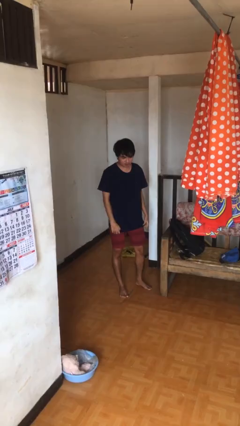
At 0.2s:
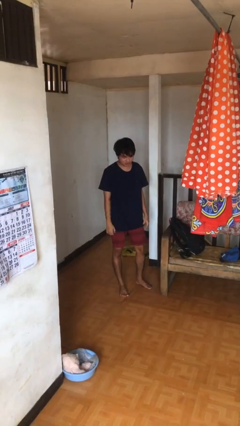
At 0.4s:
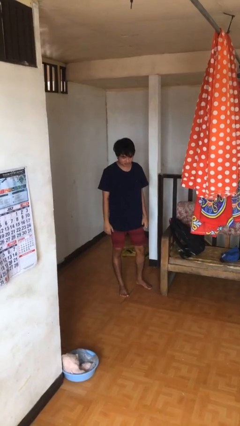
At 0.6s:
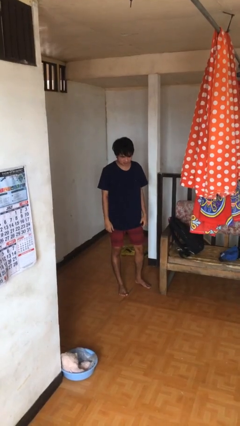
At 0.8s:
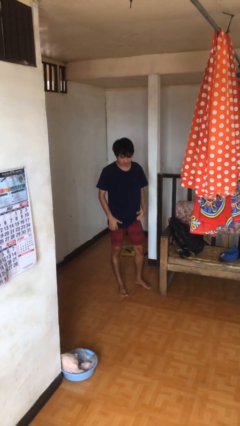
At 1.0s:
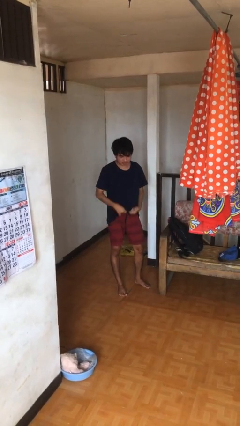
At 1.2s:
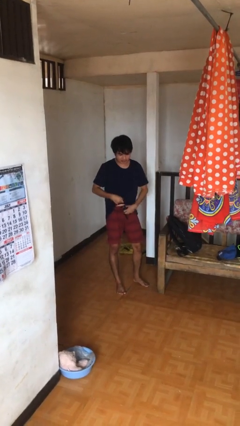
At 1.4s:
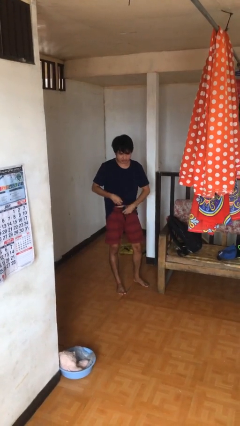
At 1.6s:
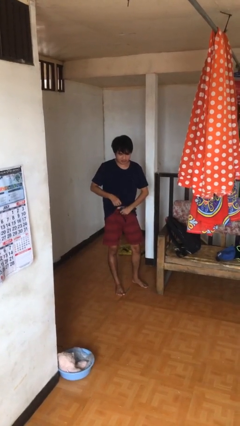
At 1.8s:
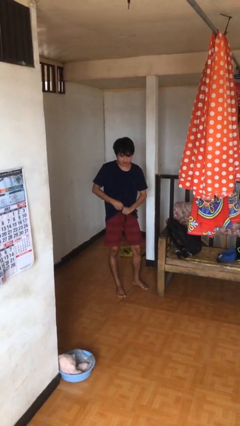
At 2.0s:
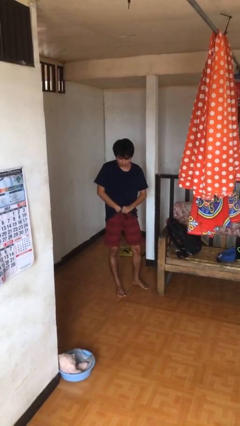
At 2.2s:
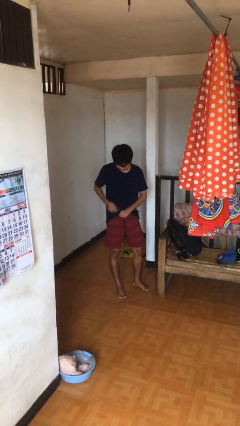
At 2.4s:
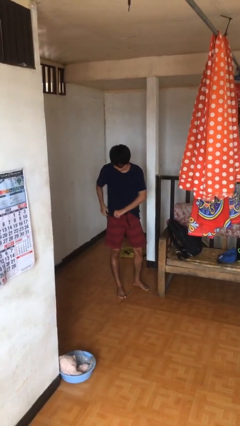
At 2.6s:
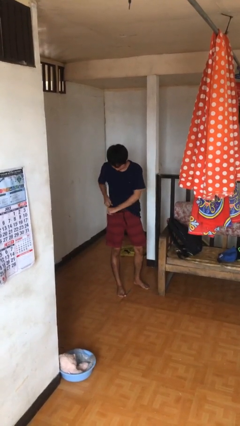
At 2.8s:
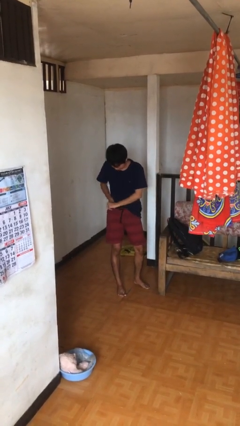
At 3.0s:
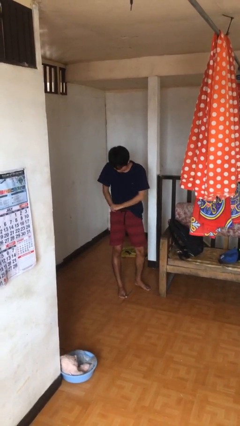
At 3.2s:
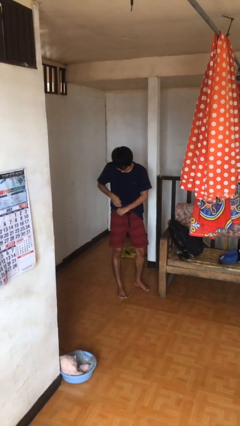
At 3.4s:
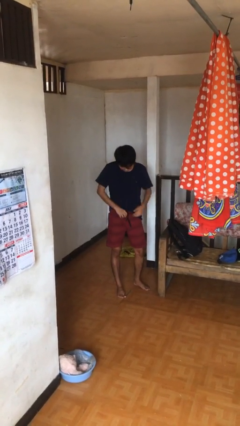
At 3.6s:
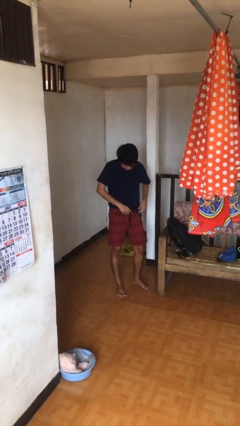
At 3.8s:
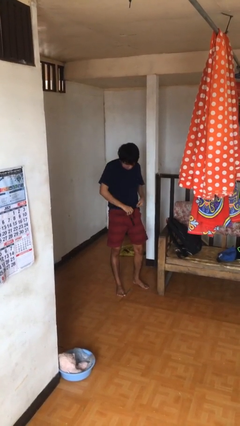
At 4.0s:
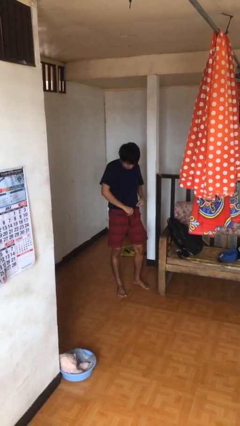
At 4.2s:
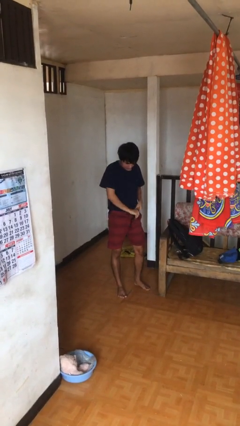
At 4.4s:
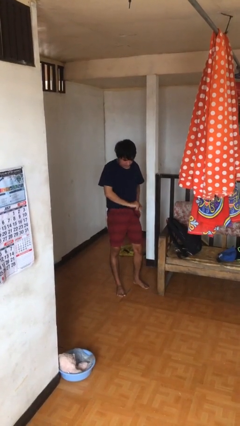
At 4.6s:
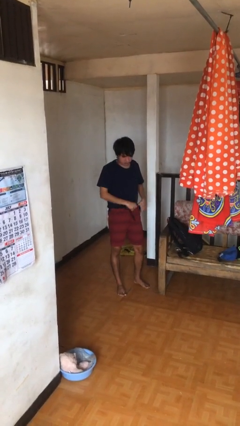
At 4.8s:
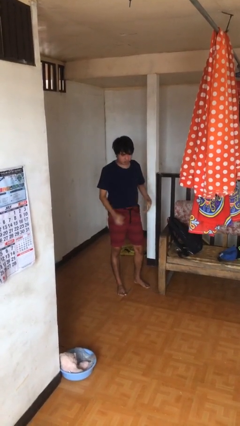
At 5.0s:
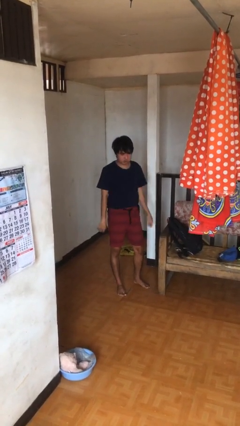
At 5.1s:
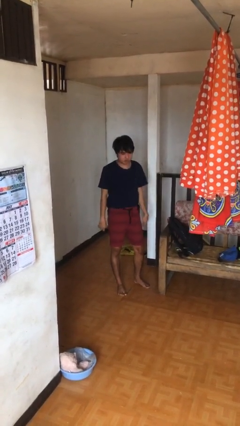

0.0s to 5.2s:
person tucks in shirt

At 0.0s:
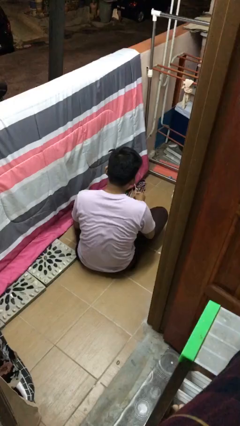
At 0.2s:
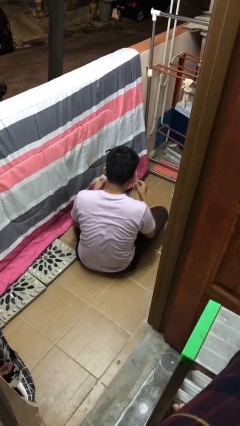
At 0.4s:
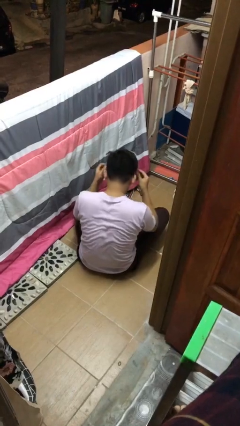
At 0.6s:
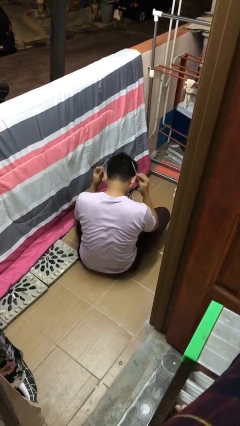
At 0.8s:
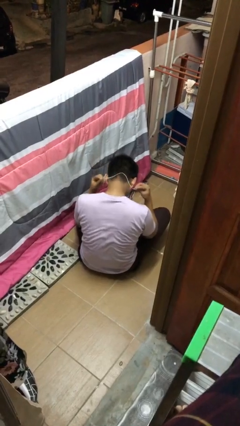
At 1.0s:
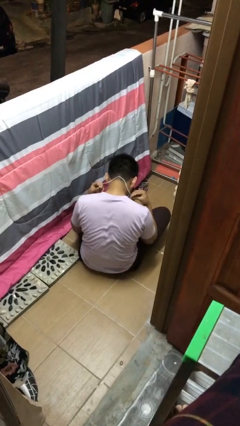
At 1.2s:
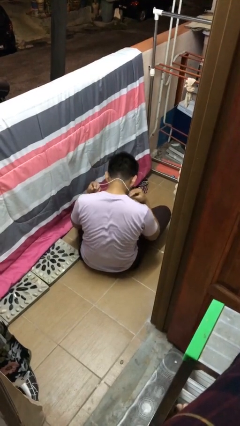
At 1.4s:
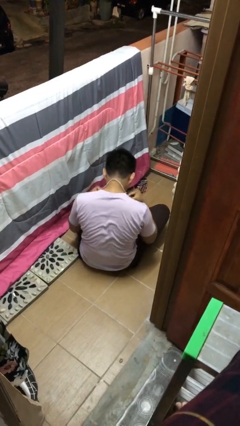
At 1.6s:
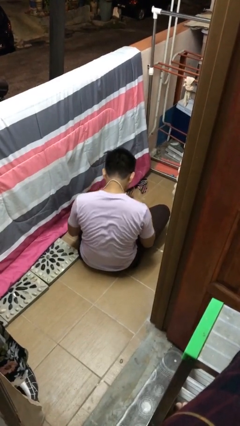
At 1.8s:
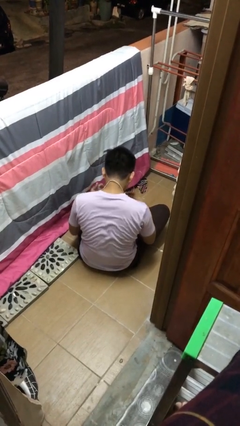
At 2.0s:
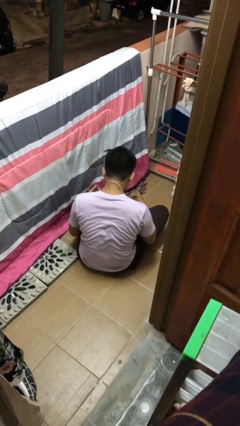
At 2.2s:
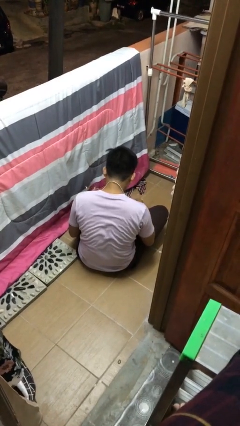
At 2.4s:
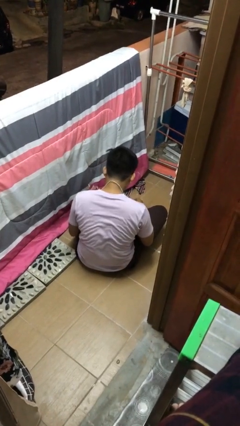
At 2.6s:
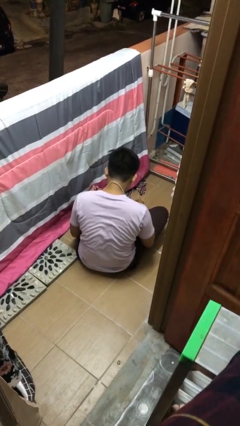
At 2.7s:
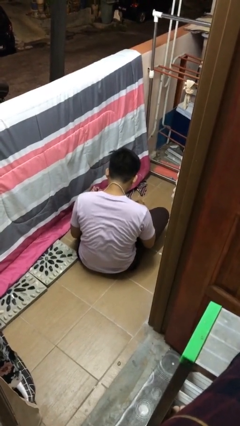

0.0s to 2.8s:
person puts on necklace

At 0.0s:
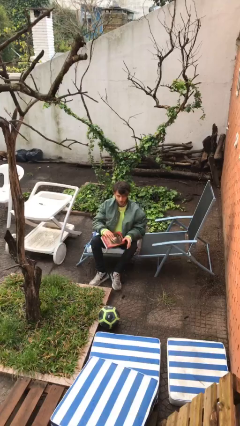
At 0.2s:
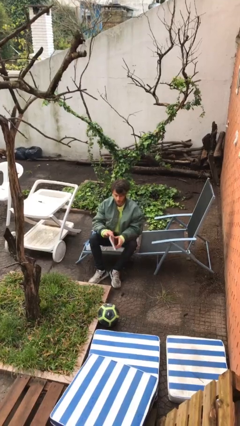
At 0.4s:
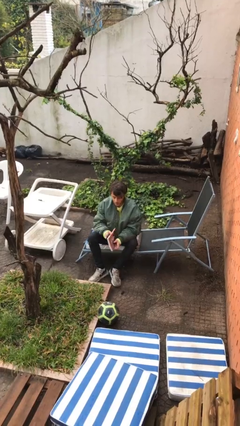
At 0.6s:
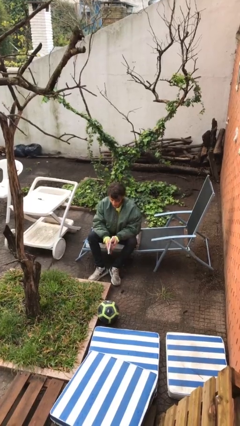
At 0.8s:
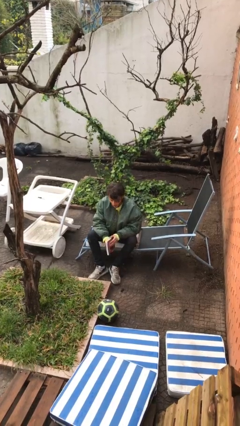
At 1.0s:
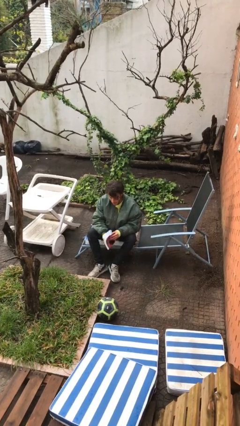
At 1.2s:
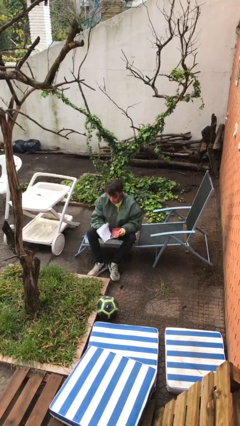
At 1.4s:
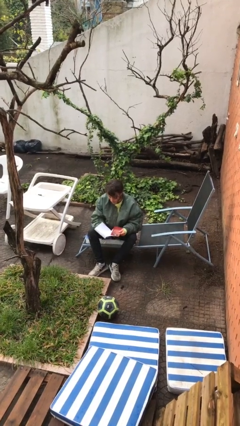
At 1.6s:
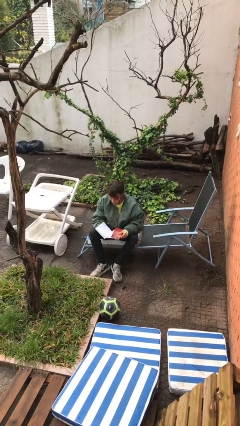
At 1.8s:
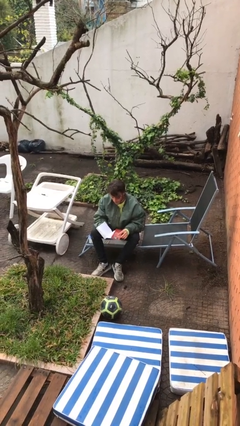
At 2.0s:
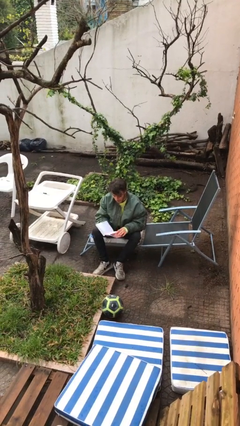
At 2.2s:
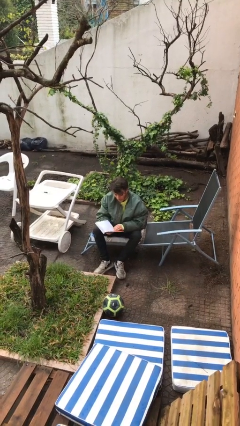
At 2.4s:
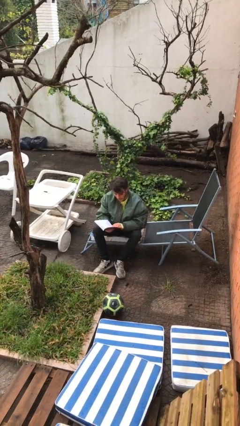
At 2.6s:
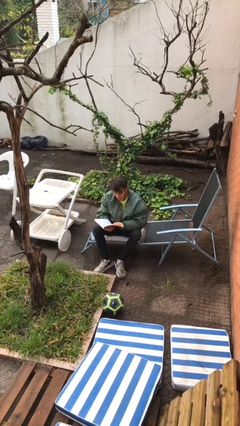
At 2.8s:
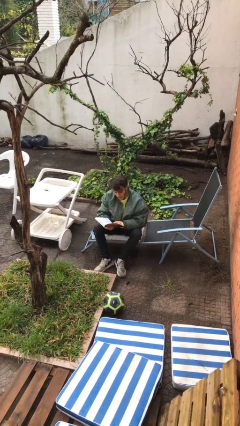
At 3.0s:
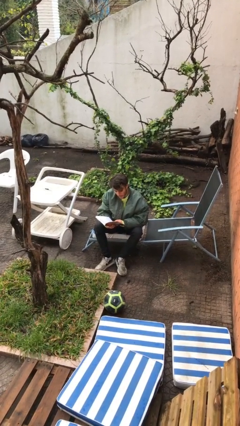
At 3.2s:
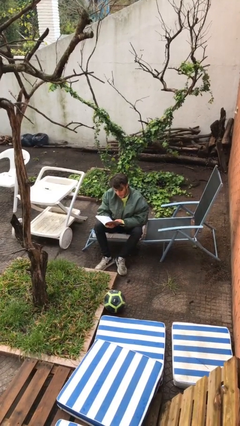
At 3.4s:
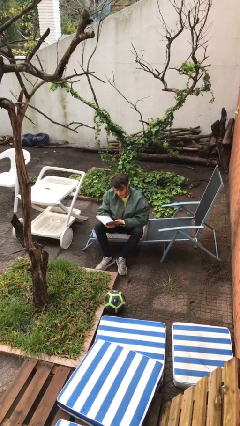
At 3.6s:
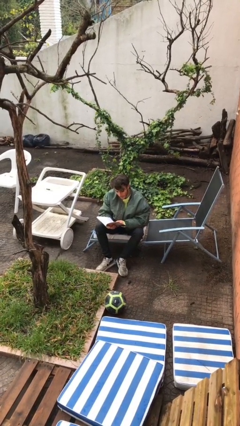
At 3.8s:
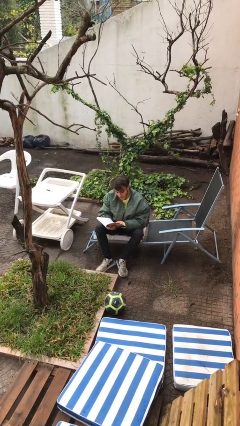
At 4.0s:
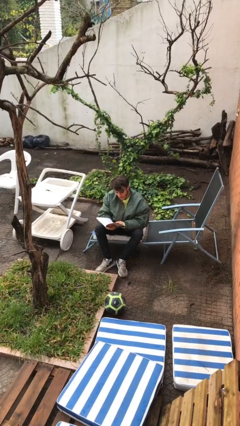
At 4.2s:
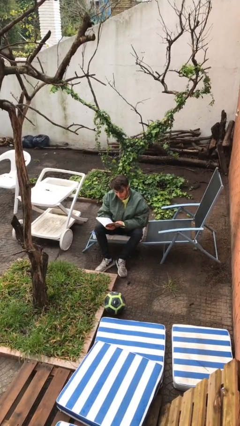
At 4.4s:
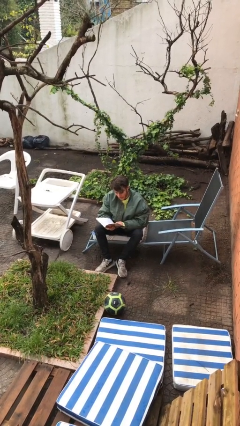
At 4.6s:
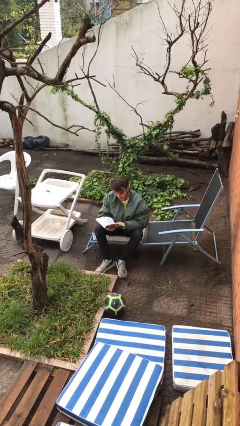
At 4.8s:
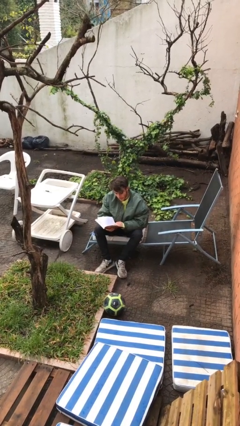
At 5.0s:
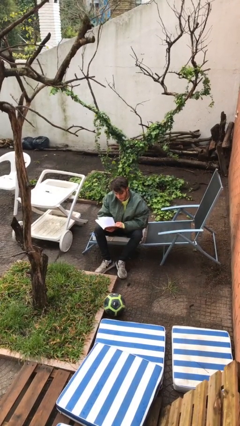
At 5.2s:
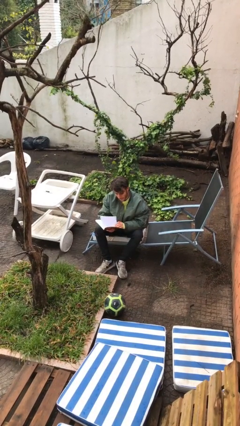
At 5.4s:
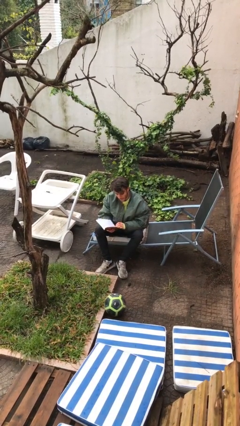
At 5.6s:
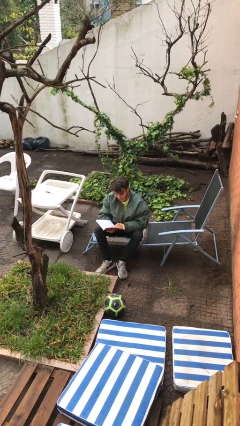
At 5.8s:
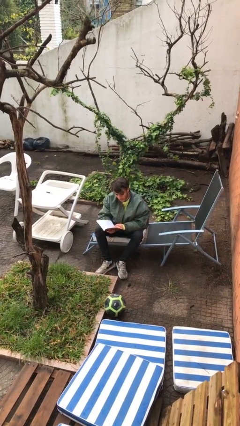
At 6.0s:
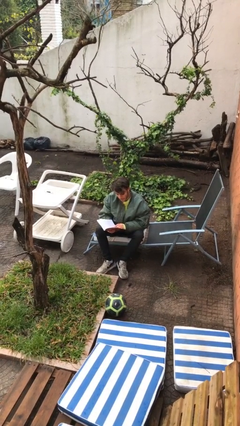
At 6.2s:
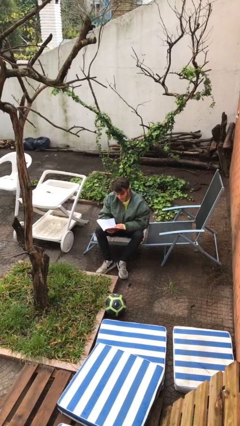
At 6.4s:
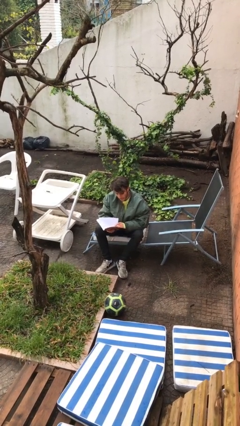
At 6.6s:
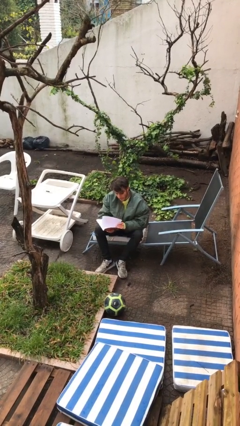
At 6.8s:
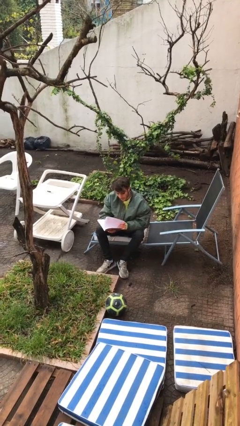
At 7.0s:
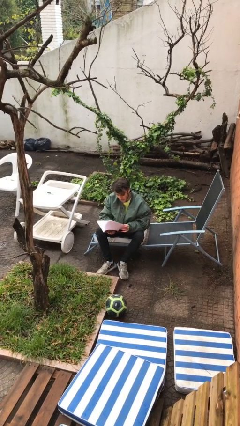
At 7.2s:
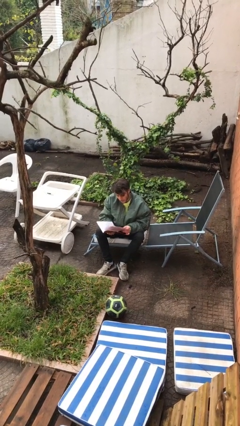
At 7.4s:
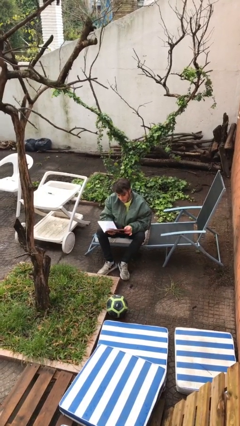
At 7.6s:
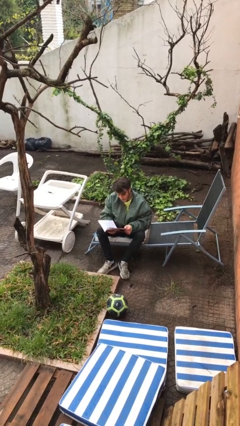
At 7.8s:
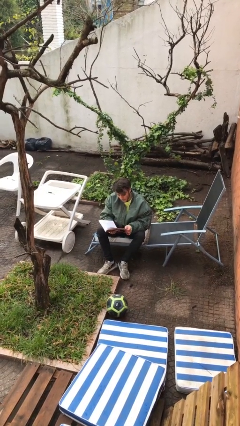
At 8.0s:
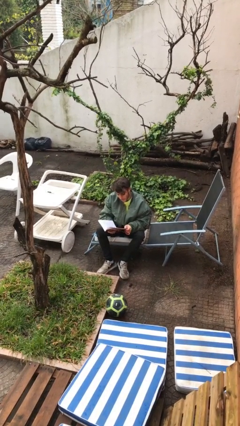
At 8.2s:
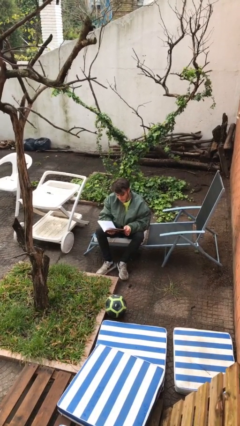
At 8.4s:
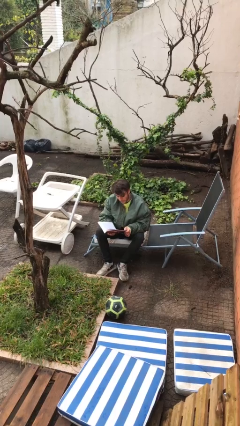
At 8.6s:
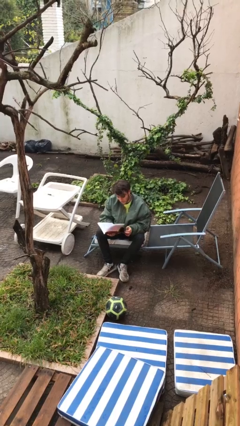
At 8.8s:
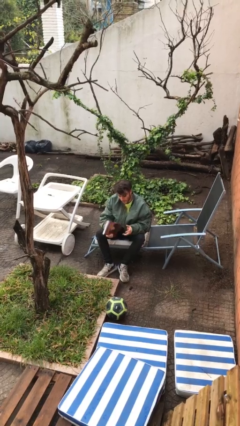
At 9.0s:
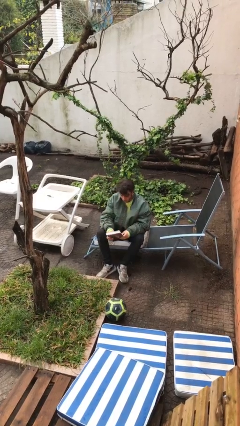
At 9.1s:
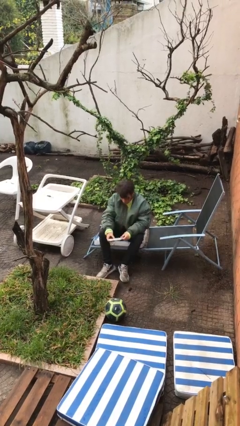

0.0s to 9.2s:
person reads document

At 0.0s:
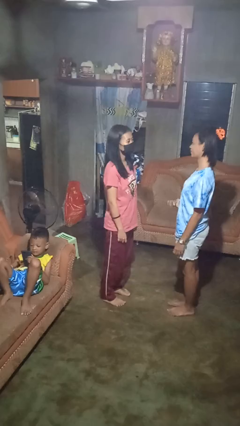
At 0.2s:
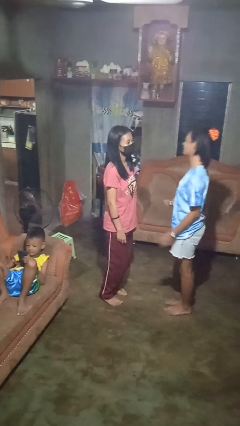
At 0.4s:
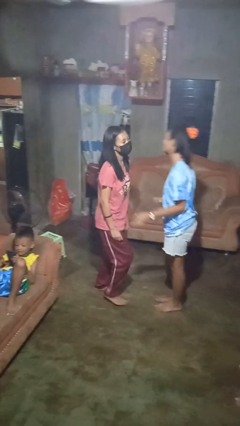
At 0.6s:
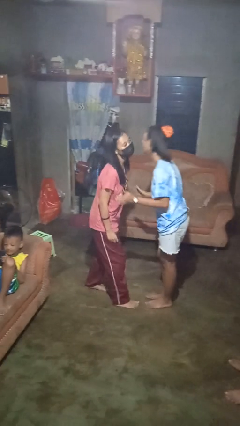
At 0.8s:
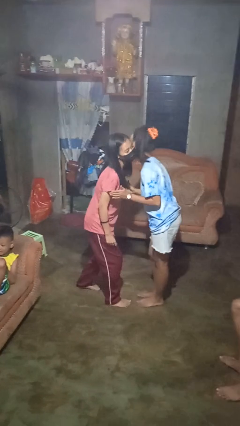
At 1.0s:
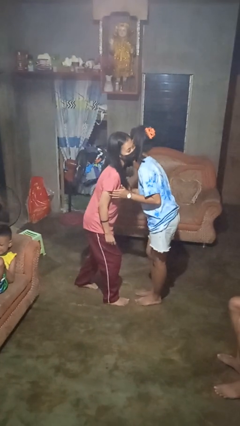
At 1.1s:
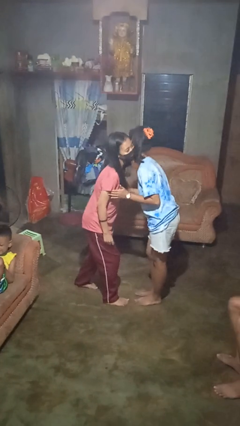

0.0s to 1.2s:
person kisses cheek of person
